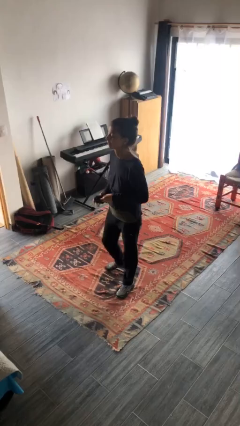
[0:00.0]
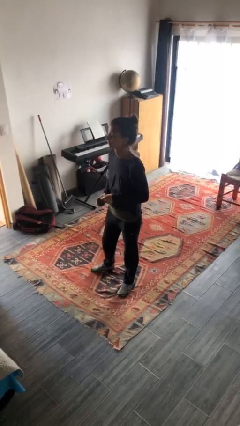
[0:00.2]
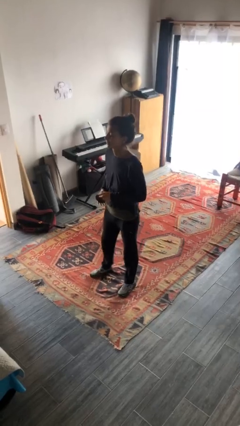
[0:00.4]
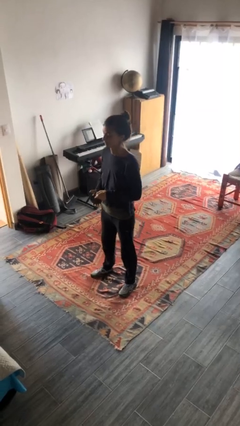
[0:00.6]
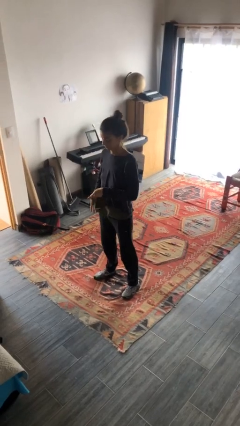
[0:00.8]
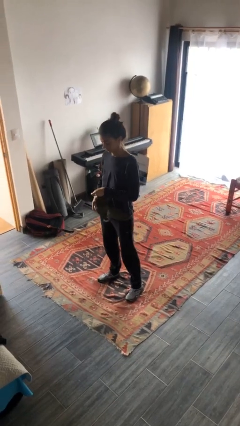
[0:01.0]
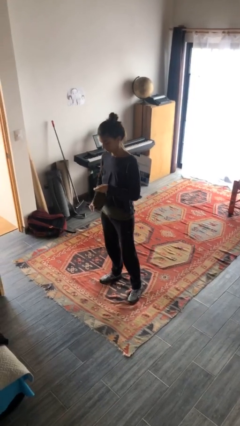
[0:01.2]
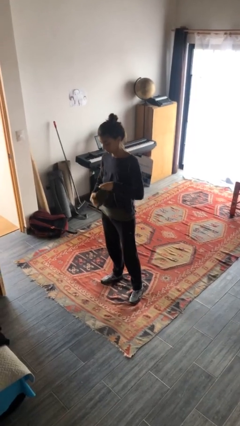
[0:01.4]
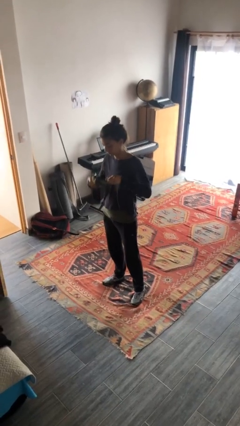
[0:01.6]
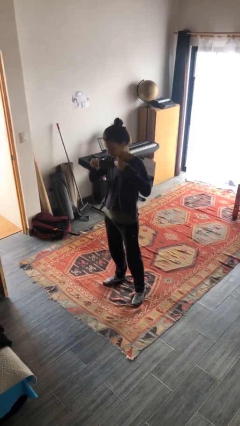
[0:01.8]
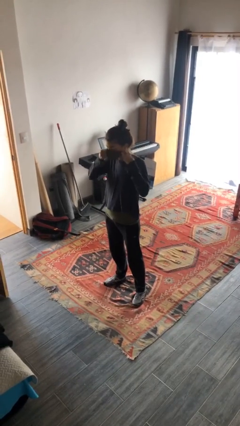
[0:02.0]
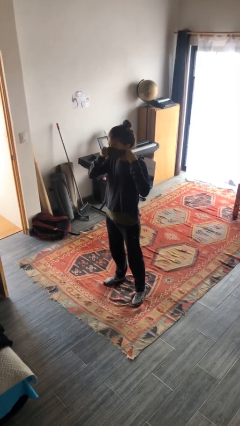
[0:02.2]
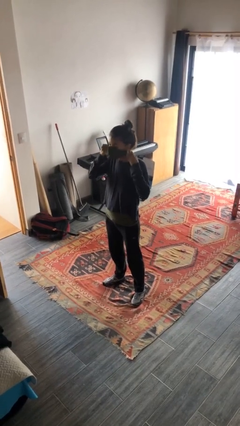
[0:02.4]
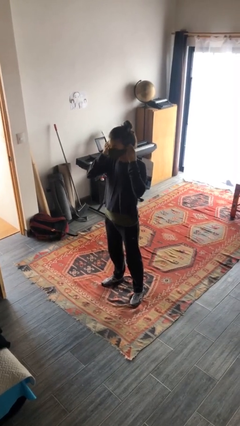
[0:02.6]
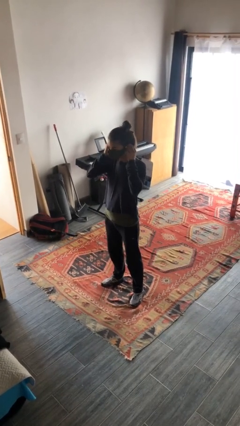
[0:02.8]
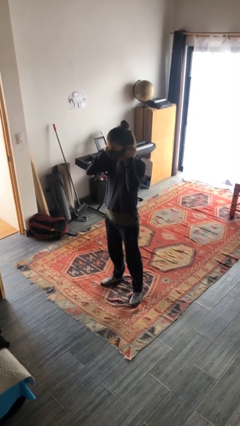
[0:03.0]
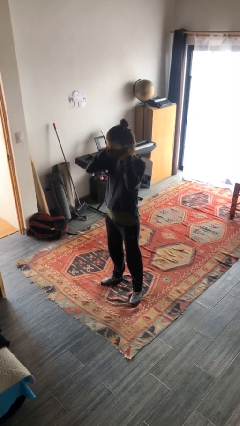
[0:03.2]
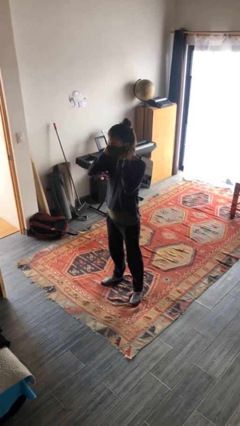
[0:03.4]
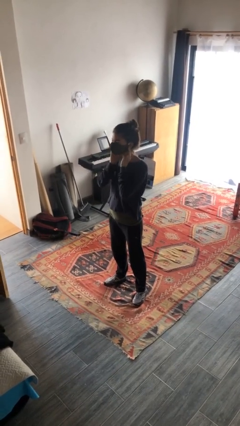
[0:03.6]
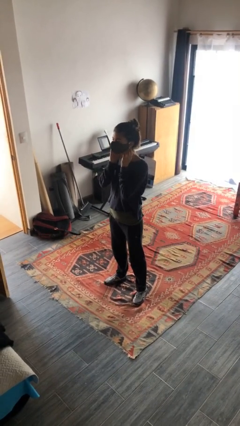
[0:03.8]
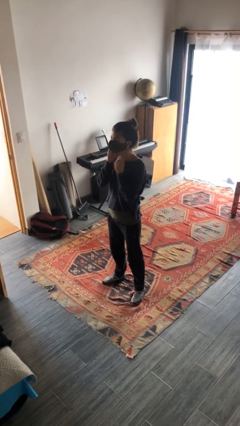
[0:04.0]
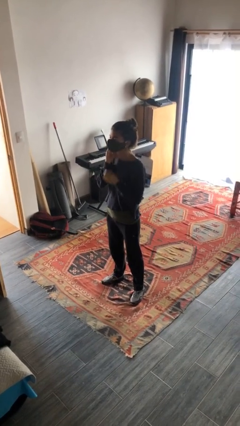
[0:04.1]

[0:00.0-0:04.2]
person puts on facemask

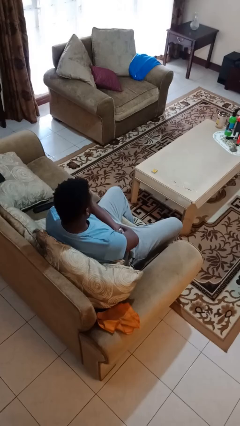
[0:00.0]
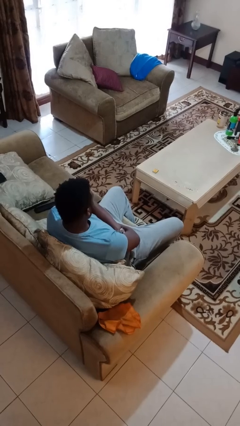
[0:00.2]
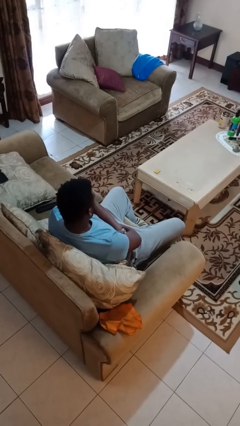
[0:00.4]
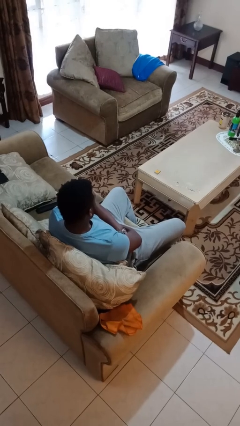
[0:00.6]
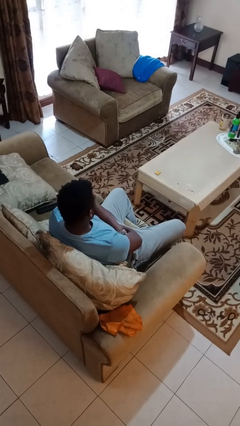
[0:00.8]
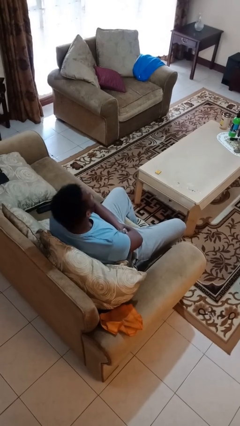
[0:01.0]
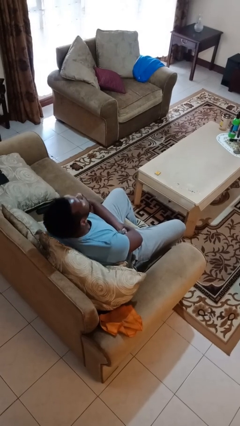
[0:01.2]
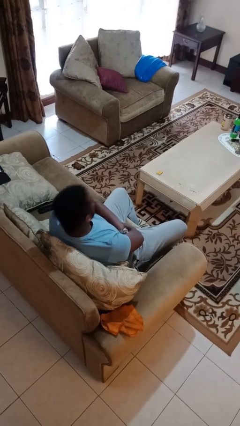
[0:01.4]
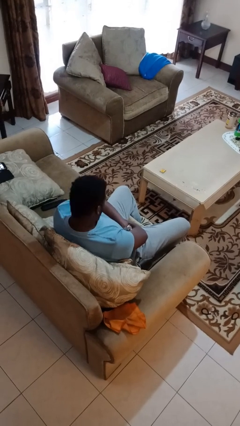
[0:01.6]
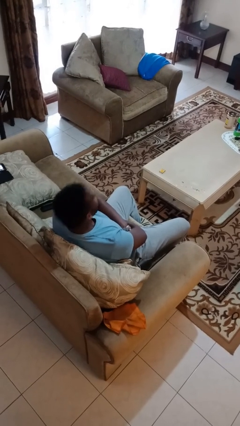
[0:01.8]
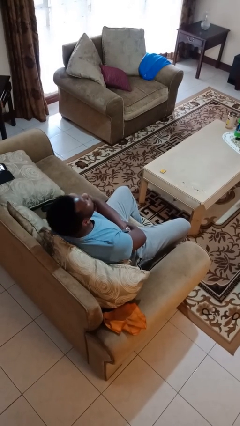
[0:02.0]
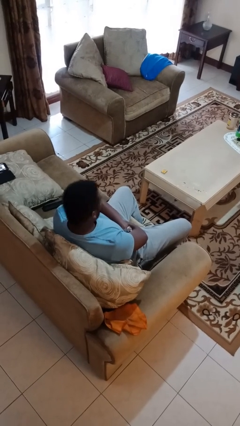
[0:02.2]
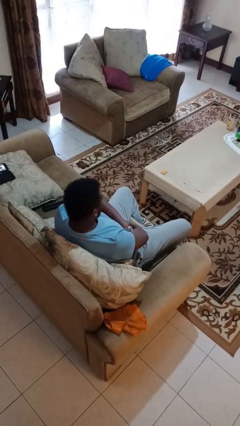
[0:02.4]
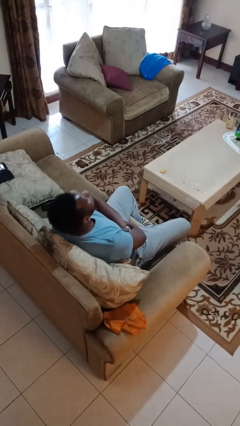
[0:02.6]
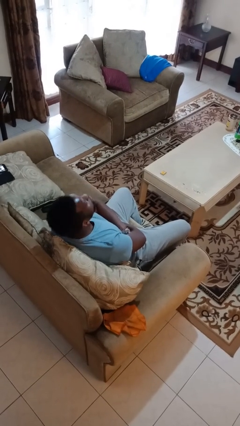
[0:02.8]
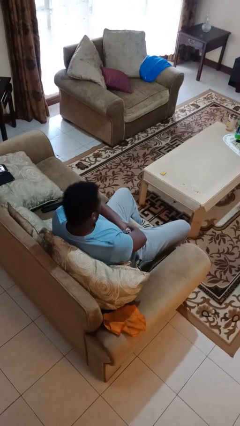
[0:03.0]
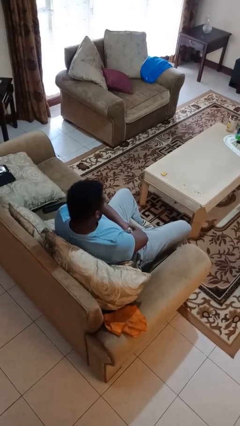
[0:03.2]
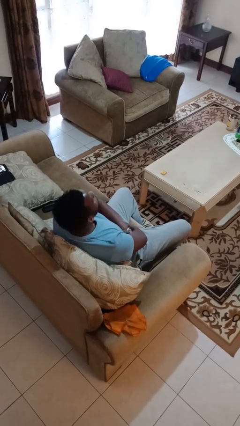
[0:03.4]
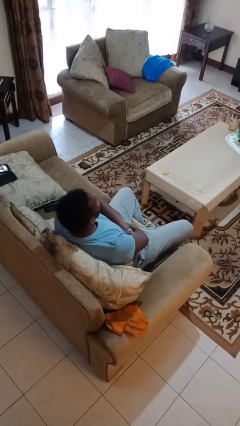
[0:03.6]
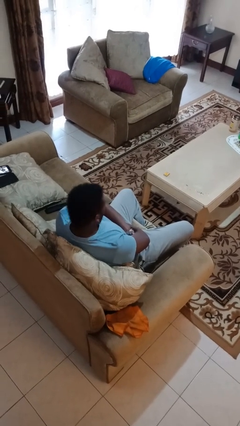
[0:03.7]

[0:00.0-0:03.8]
person nods head

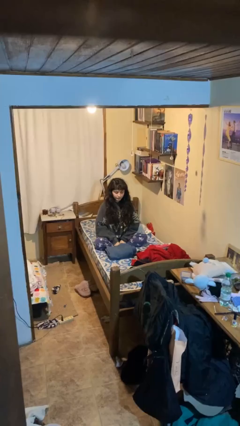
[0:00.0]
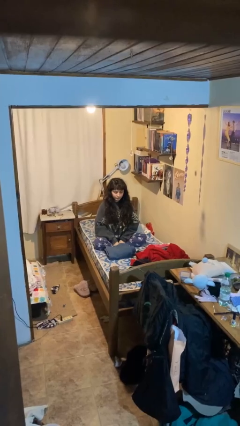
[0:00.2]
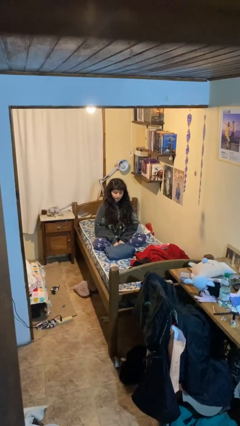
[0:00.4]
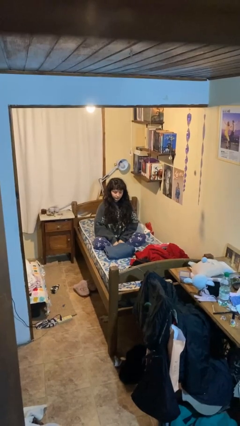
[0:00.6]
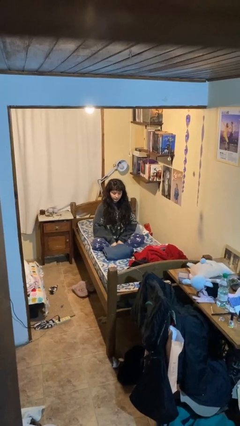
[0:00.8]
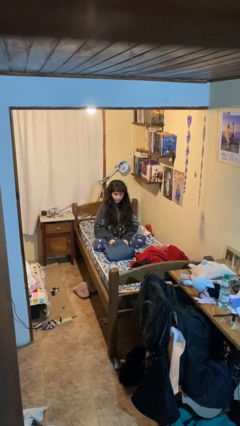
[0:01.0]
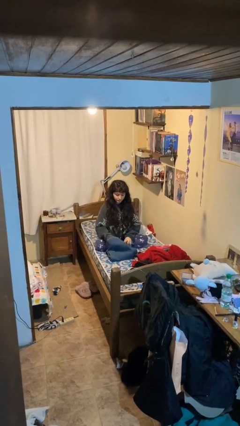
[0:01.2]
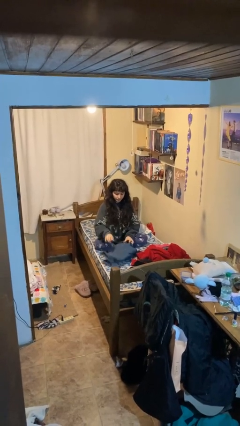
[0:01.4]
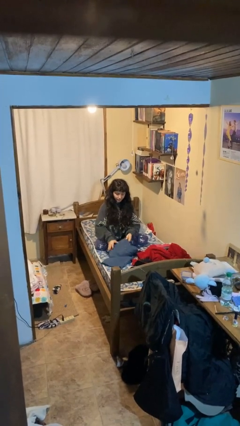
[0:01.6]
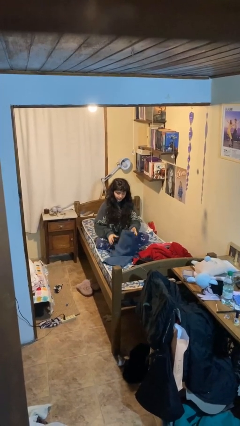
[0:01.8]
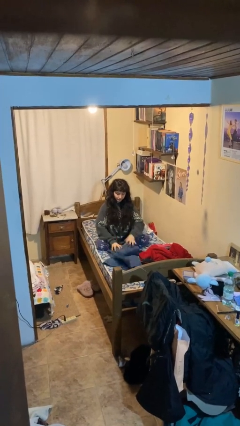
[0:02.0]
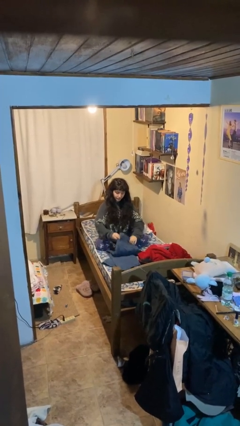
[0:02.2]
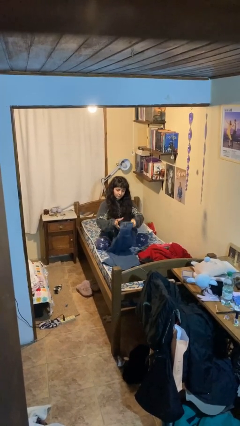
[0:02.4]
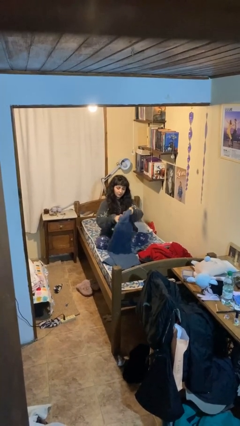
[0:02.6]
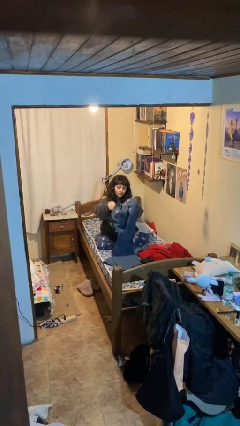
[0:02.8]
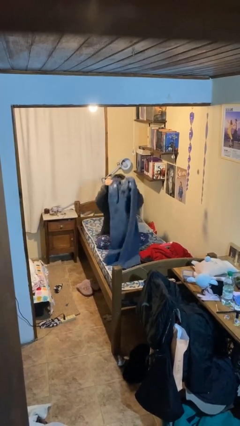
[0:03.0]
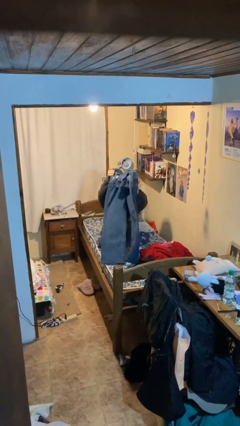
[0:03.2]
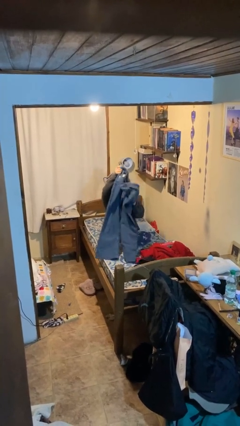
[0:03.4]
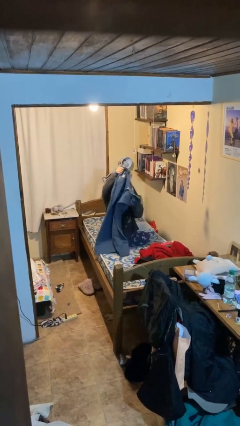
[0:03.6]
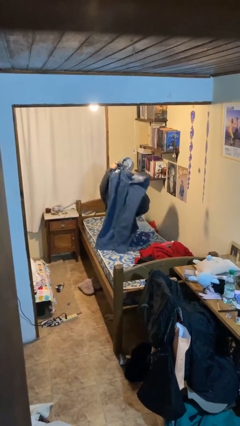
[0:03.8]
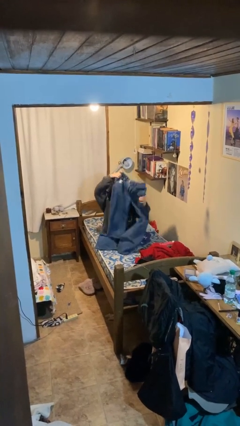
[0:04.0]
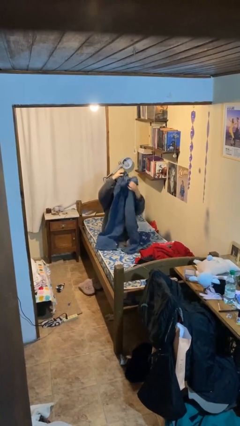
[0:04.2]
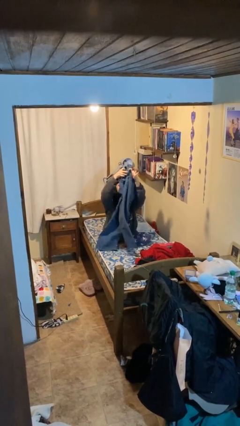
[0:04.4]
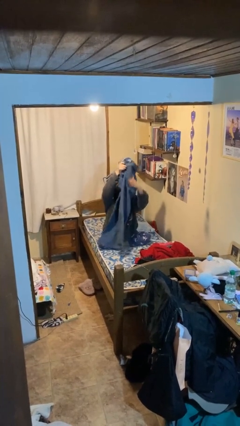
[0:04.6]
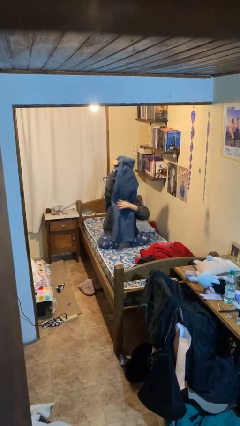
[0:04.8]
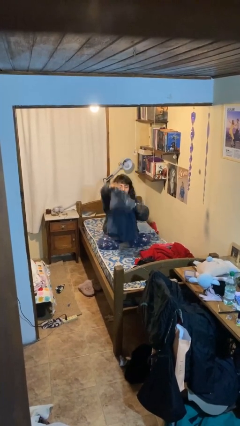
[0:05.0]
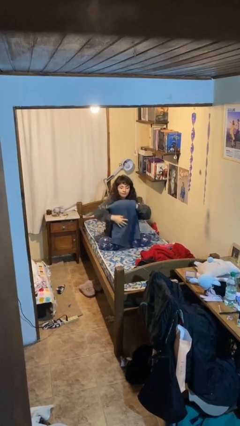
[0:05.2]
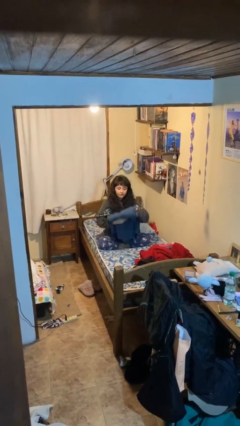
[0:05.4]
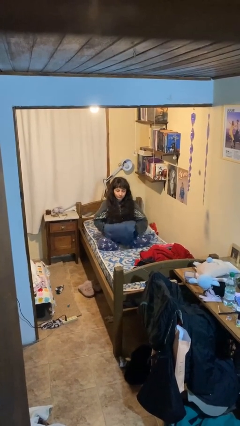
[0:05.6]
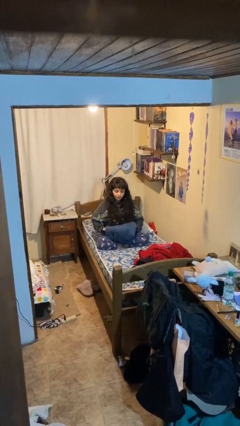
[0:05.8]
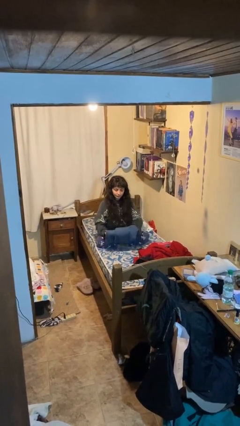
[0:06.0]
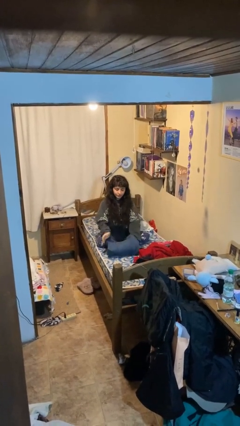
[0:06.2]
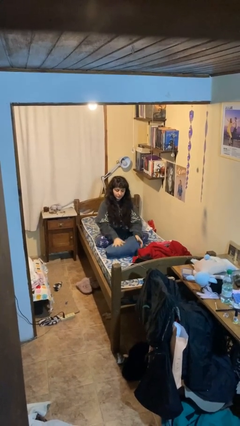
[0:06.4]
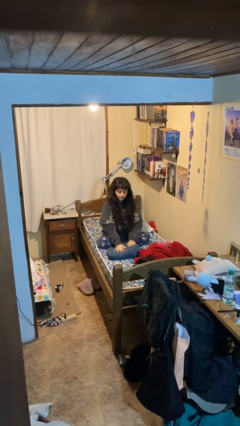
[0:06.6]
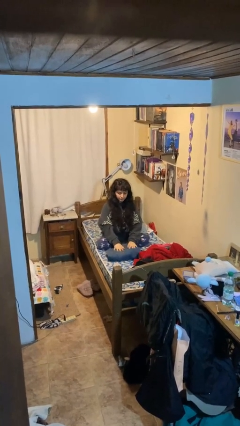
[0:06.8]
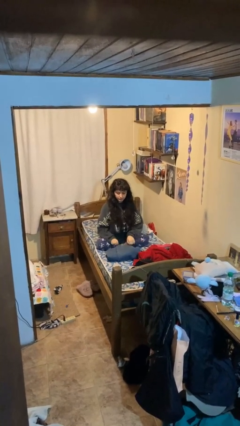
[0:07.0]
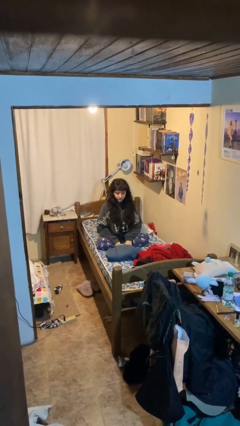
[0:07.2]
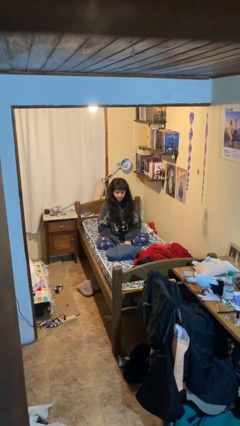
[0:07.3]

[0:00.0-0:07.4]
person folds pants

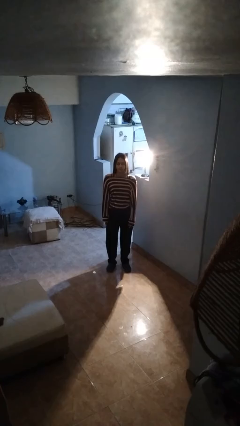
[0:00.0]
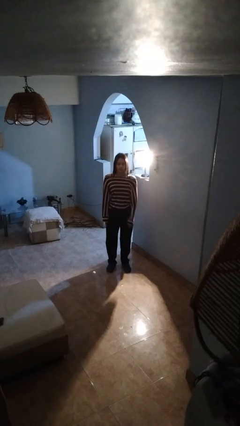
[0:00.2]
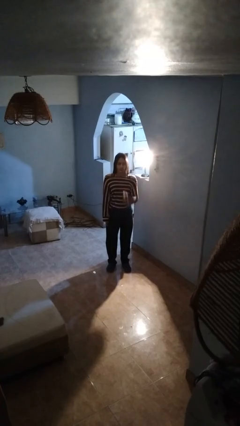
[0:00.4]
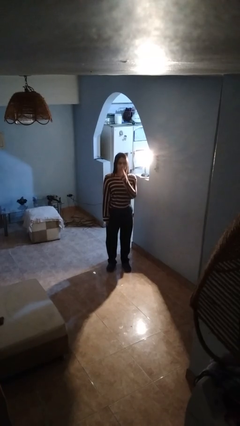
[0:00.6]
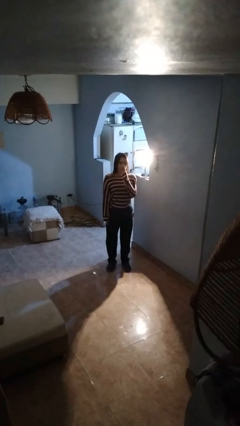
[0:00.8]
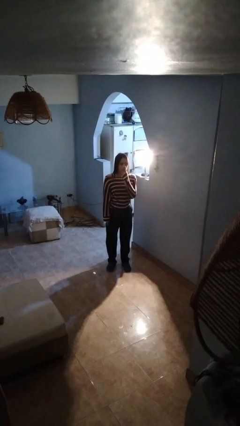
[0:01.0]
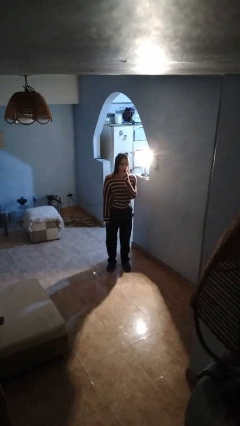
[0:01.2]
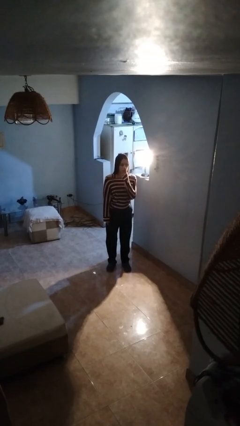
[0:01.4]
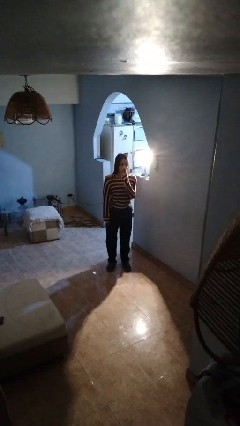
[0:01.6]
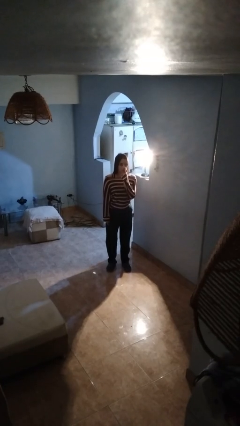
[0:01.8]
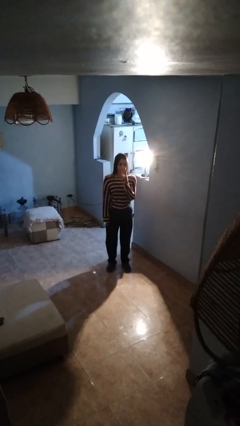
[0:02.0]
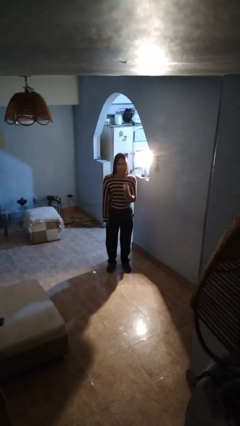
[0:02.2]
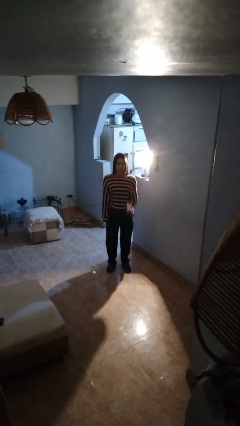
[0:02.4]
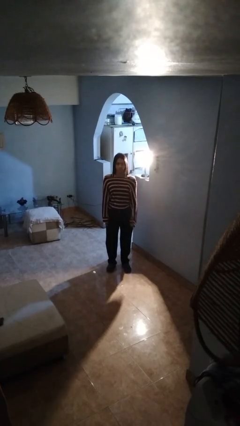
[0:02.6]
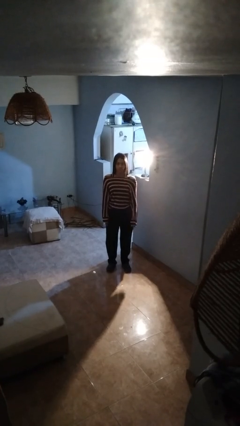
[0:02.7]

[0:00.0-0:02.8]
person gestures be quiet
